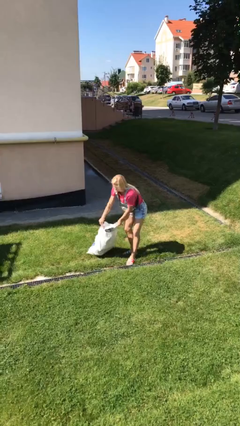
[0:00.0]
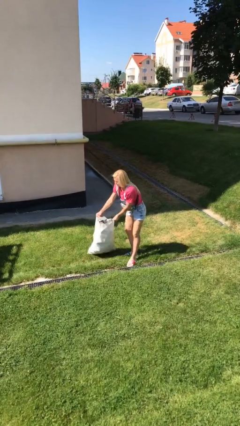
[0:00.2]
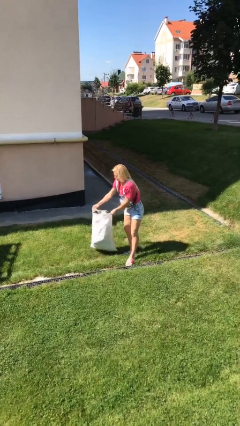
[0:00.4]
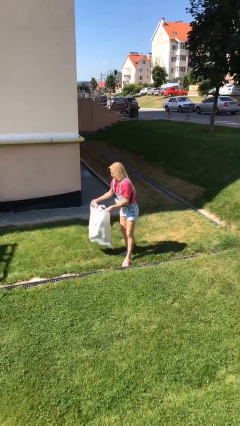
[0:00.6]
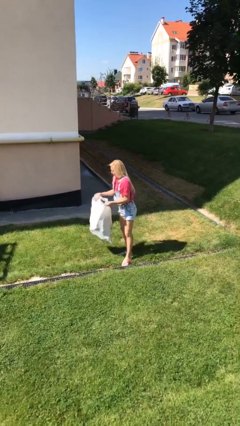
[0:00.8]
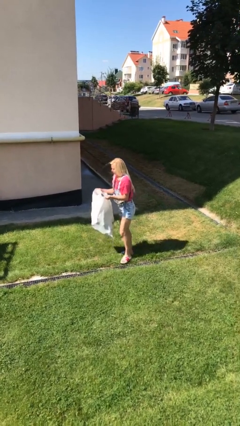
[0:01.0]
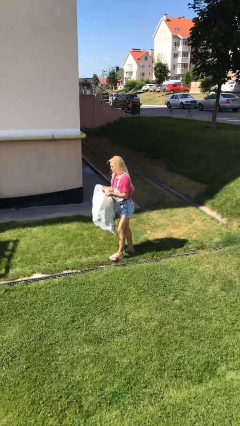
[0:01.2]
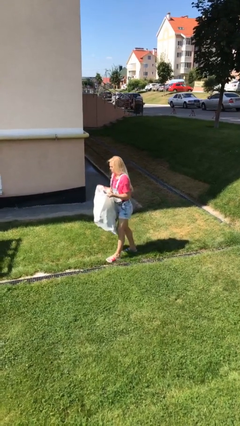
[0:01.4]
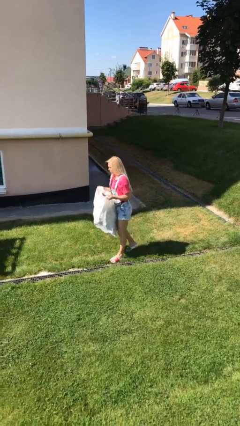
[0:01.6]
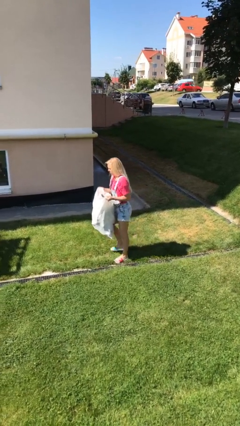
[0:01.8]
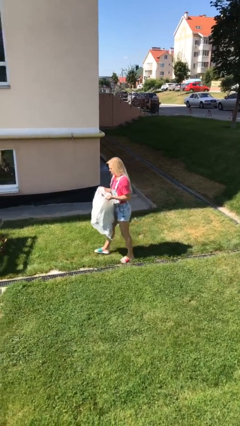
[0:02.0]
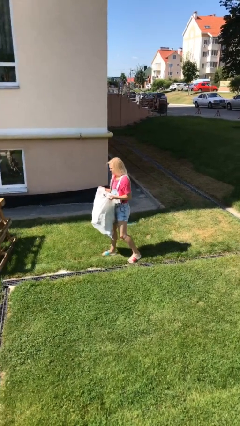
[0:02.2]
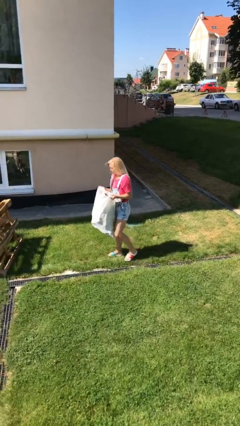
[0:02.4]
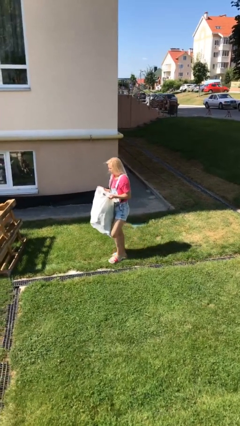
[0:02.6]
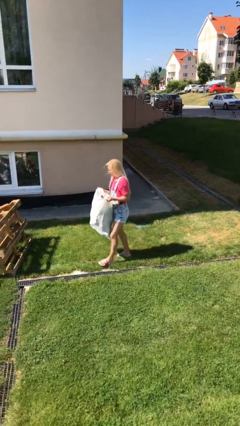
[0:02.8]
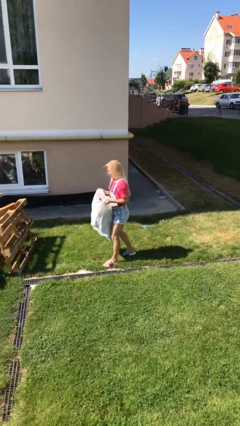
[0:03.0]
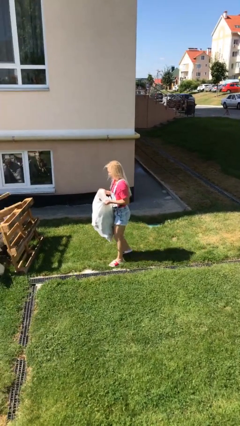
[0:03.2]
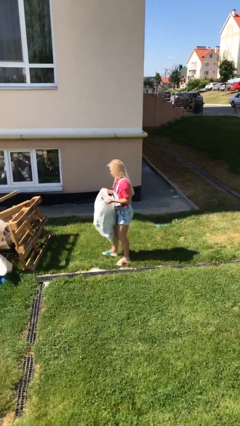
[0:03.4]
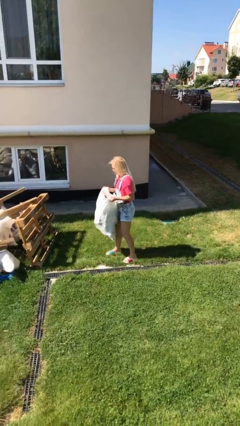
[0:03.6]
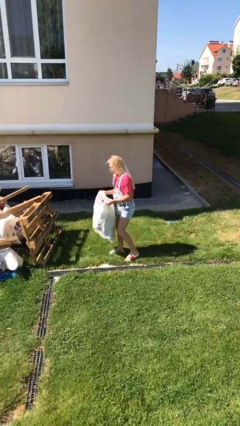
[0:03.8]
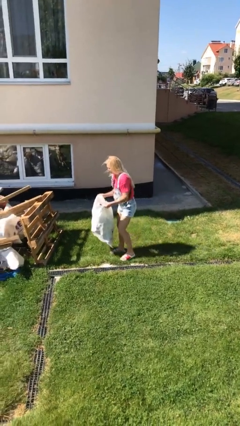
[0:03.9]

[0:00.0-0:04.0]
person carries heavy object

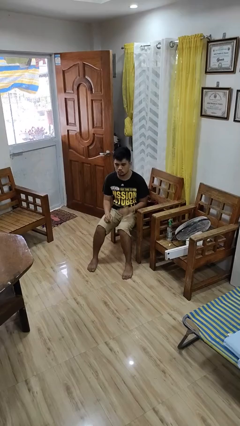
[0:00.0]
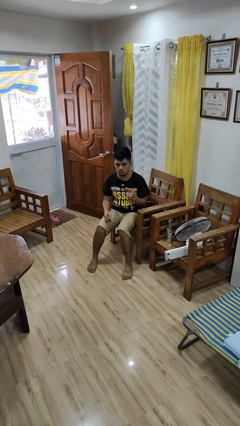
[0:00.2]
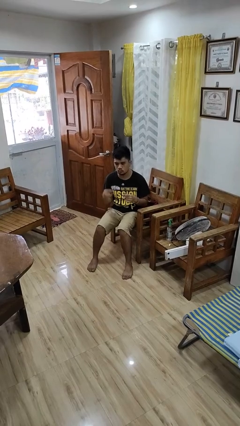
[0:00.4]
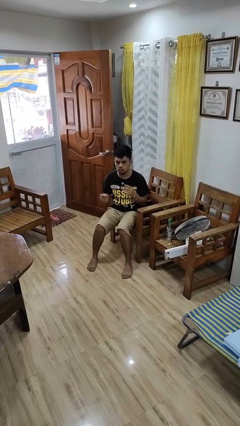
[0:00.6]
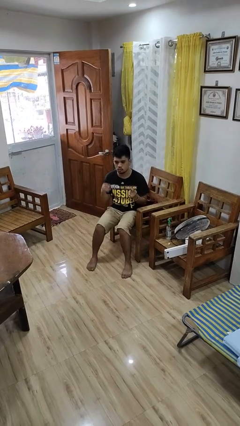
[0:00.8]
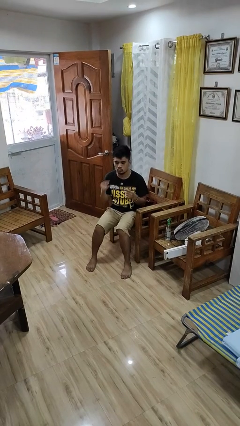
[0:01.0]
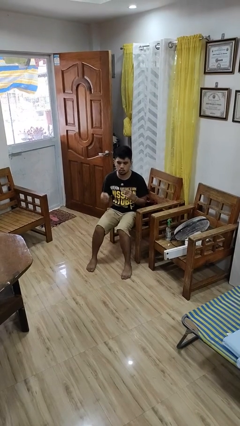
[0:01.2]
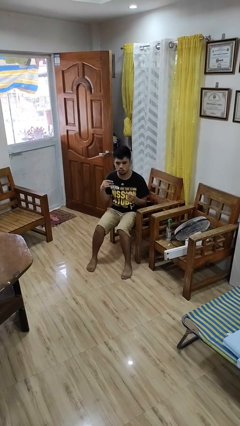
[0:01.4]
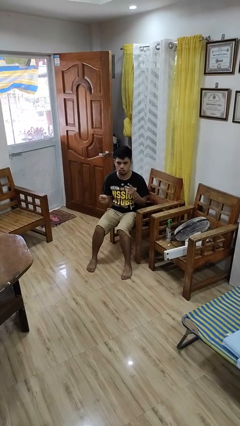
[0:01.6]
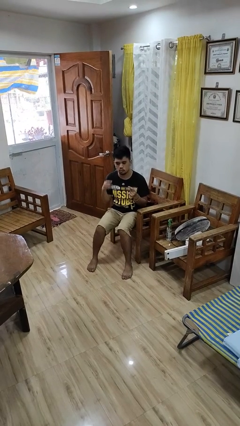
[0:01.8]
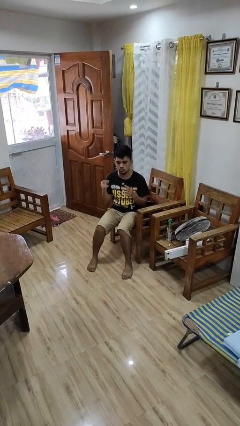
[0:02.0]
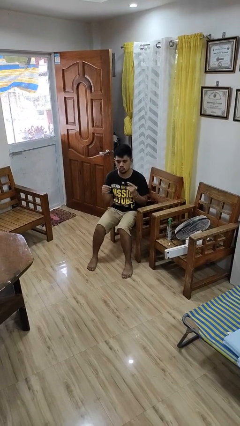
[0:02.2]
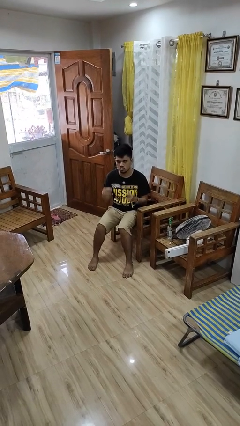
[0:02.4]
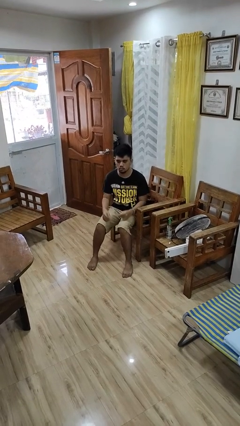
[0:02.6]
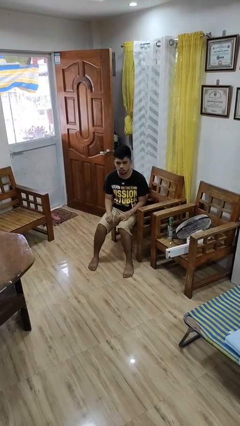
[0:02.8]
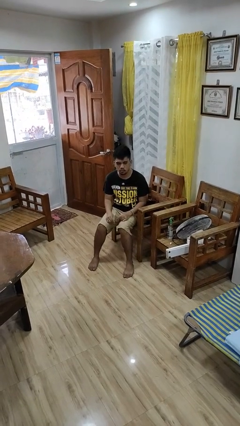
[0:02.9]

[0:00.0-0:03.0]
person snaps fingers

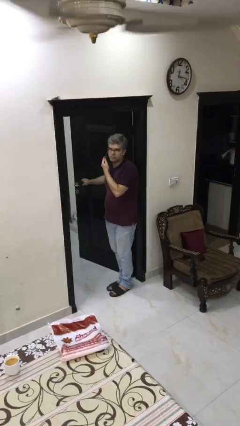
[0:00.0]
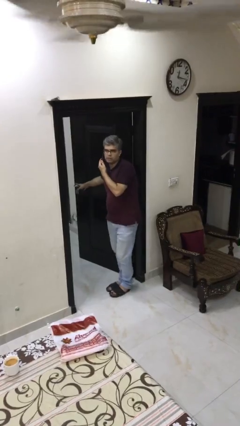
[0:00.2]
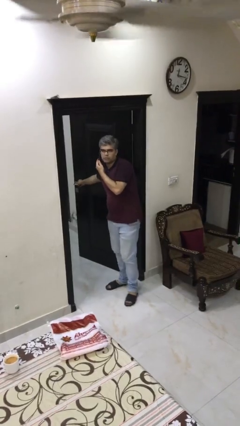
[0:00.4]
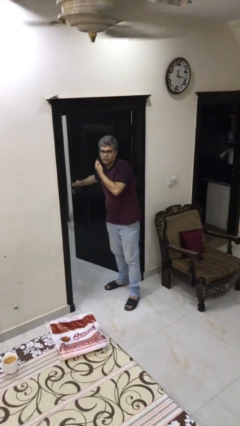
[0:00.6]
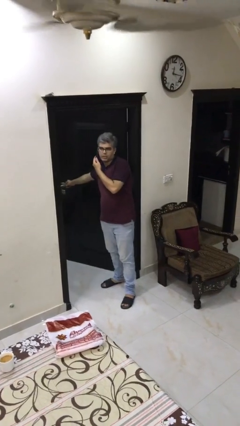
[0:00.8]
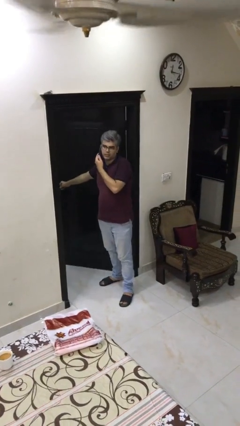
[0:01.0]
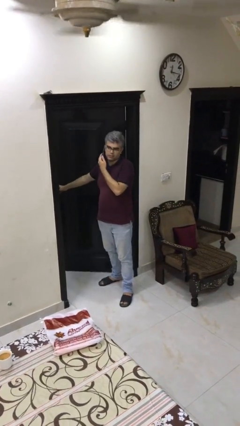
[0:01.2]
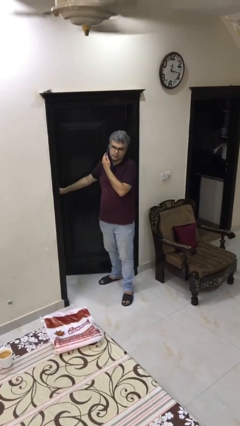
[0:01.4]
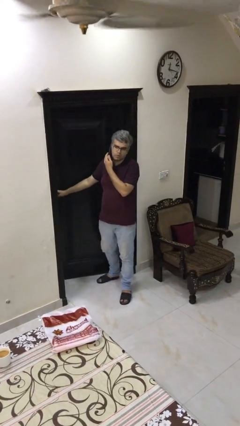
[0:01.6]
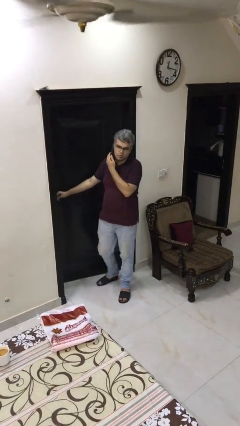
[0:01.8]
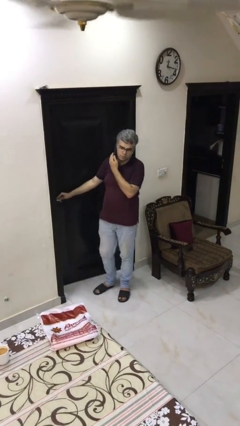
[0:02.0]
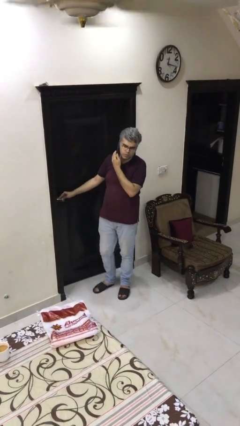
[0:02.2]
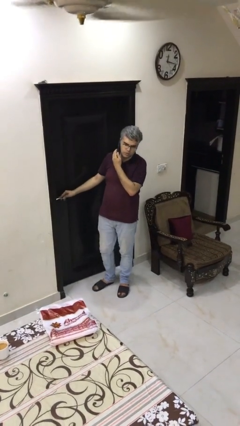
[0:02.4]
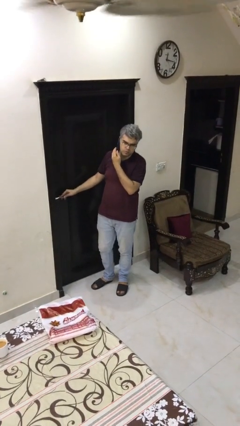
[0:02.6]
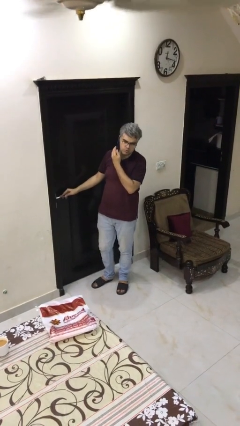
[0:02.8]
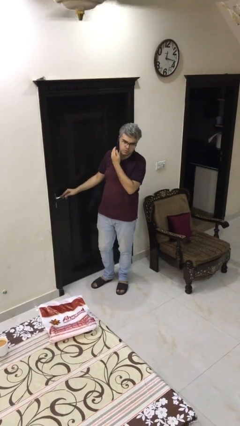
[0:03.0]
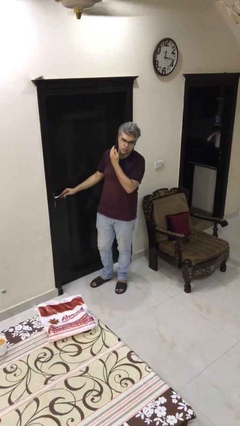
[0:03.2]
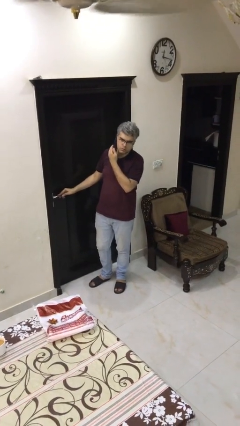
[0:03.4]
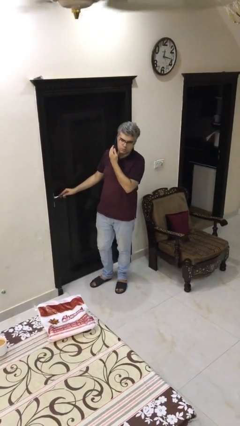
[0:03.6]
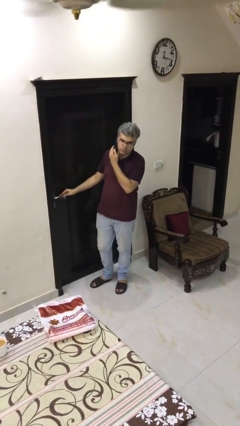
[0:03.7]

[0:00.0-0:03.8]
person closes facility door

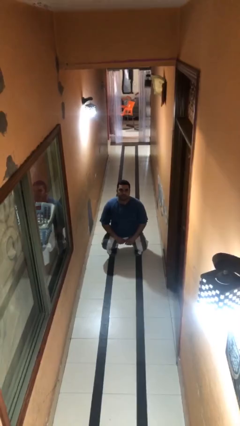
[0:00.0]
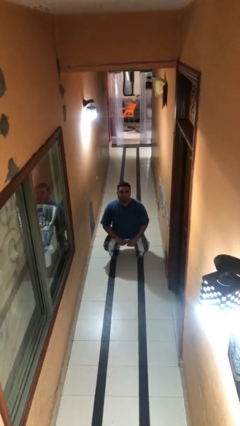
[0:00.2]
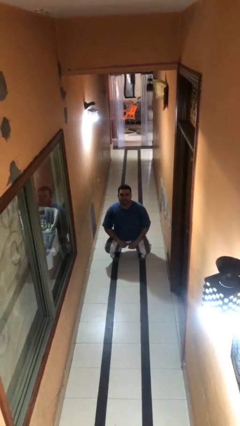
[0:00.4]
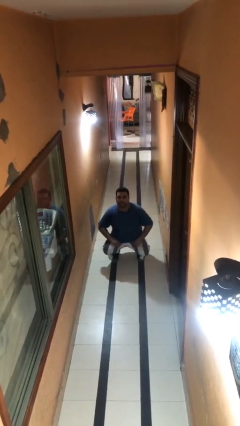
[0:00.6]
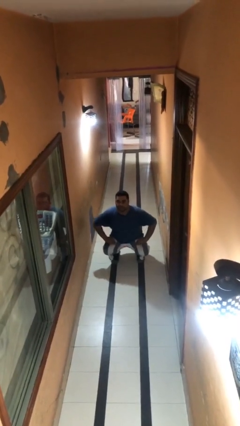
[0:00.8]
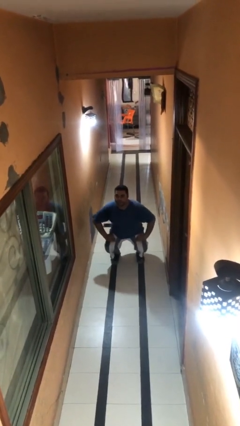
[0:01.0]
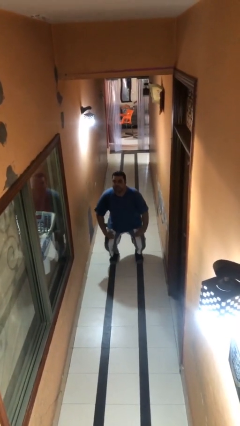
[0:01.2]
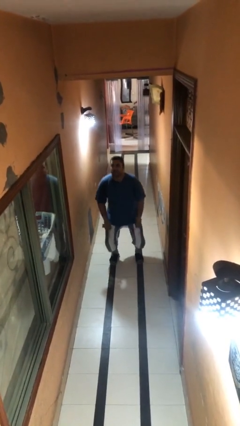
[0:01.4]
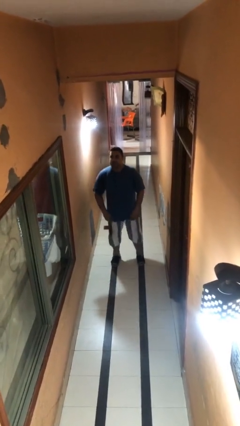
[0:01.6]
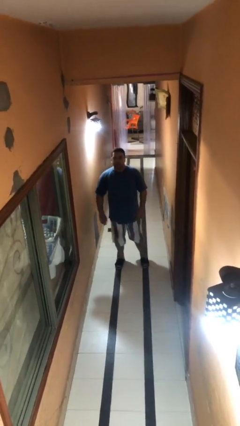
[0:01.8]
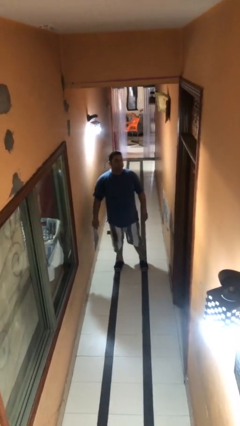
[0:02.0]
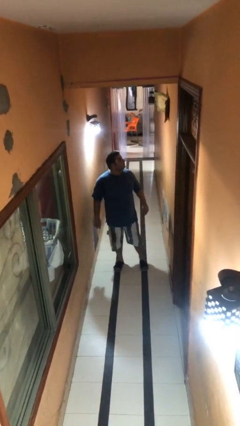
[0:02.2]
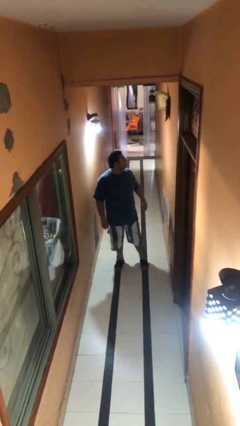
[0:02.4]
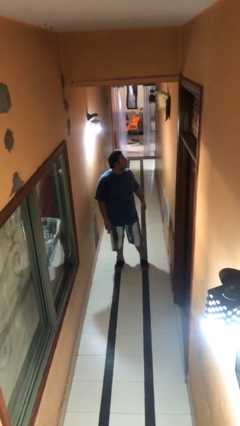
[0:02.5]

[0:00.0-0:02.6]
person stands up

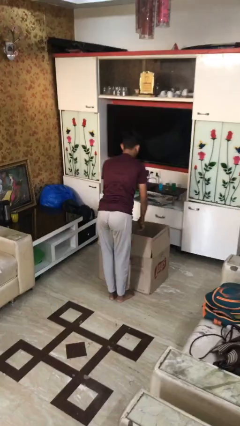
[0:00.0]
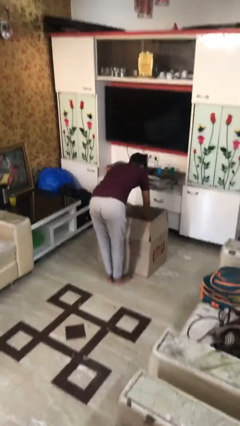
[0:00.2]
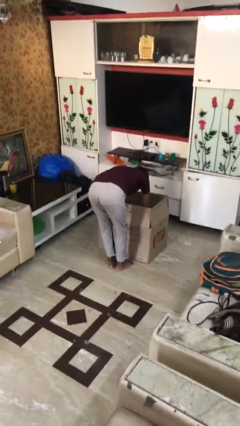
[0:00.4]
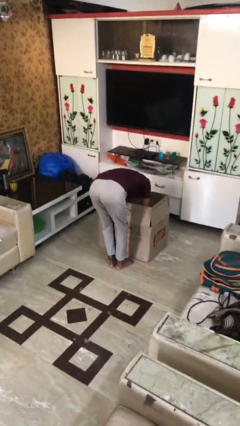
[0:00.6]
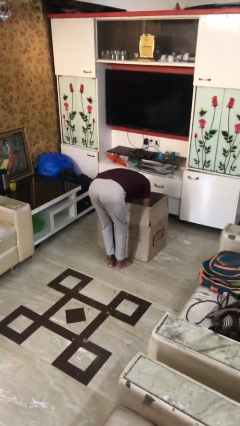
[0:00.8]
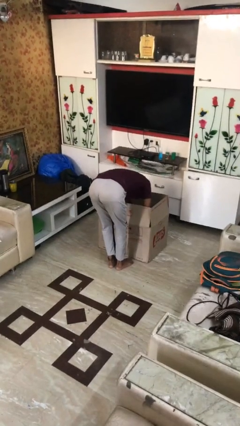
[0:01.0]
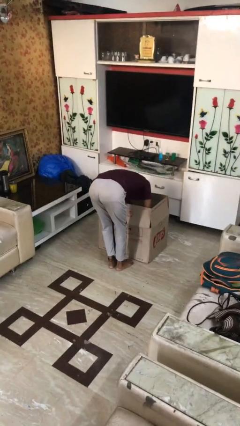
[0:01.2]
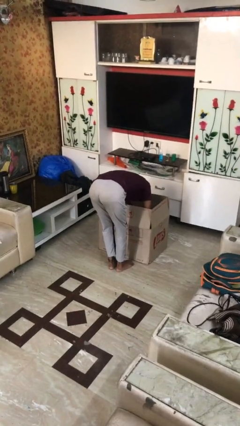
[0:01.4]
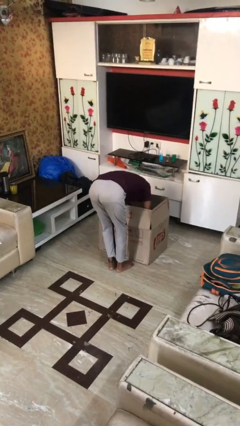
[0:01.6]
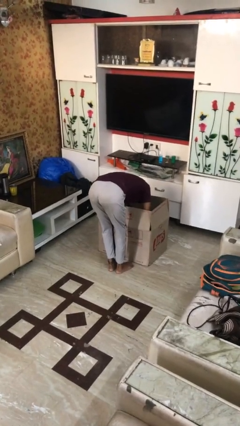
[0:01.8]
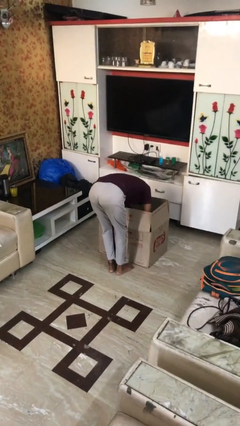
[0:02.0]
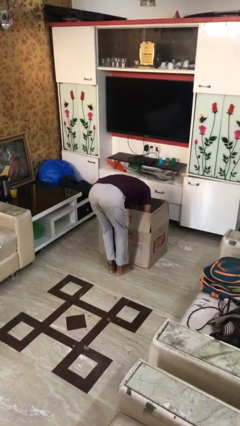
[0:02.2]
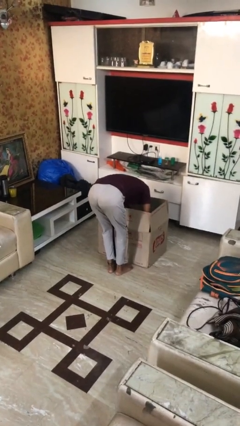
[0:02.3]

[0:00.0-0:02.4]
person searches in box

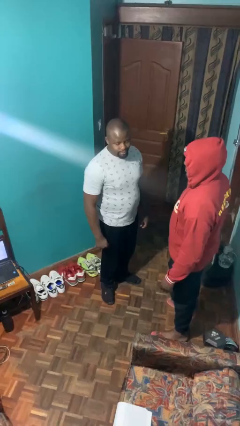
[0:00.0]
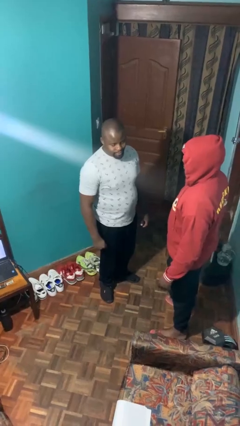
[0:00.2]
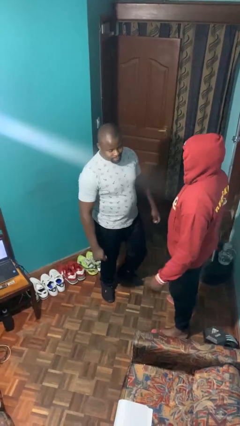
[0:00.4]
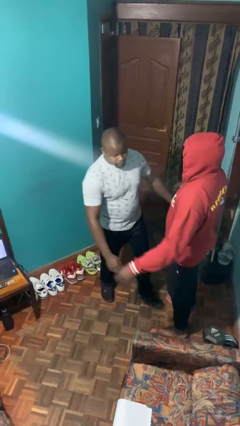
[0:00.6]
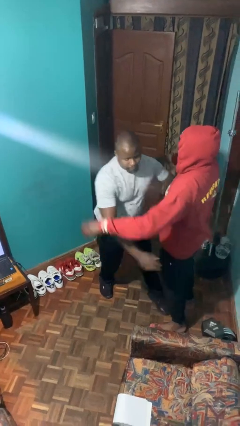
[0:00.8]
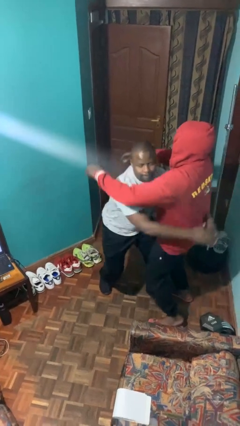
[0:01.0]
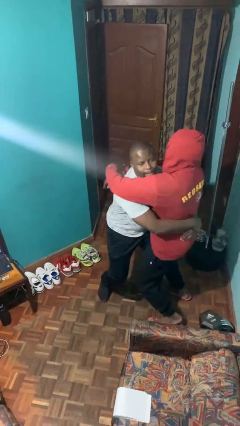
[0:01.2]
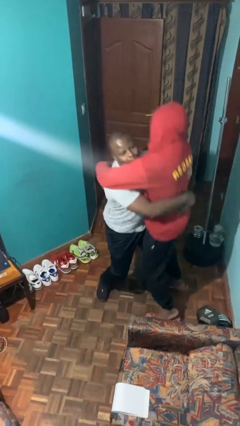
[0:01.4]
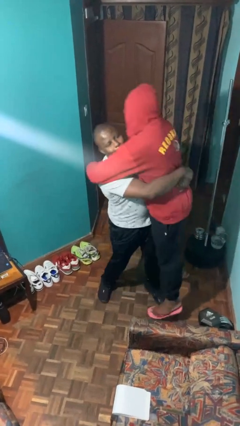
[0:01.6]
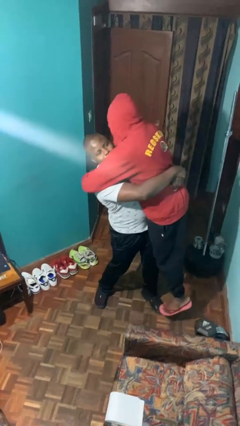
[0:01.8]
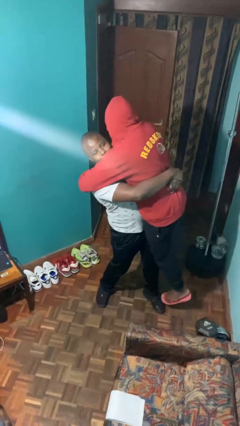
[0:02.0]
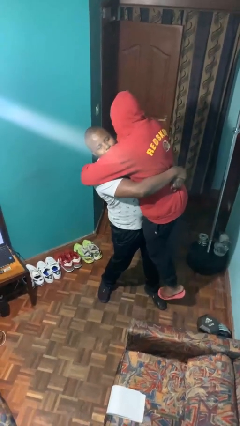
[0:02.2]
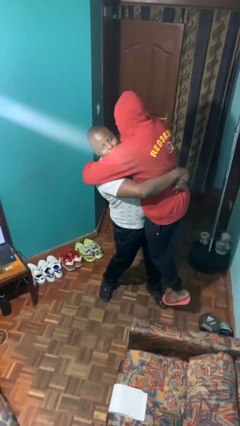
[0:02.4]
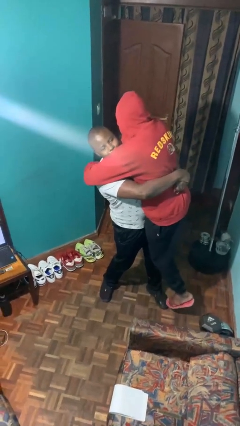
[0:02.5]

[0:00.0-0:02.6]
person picks up person
